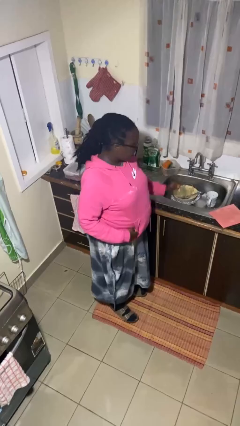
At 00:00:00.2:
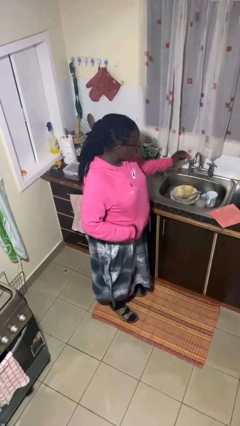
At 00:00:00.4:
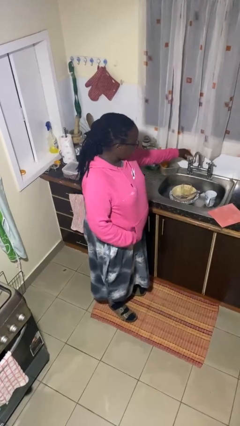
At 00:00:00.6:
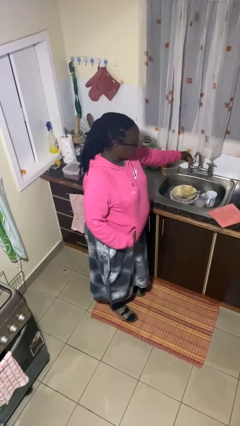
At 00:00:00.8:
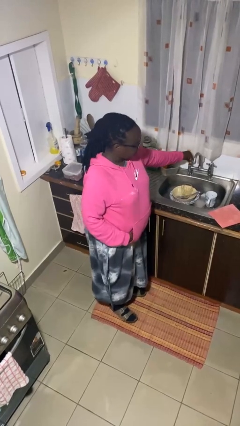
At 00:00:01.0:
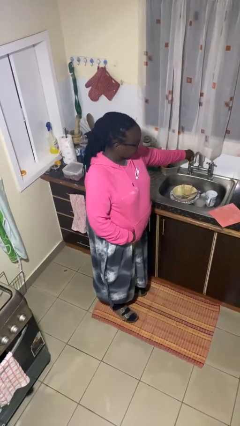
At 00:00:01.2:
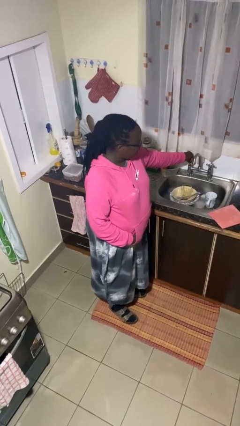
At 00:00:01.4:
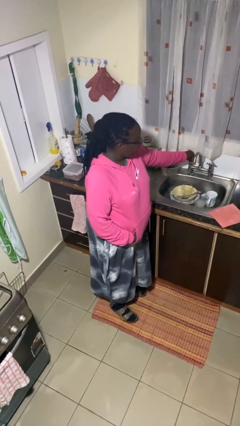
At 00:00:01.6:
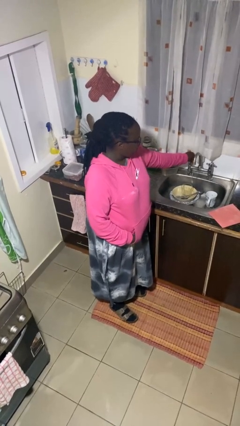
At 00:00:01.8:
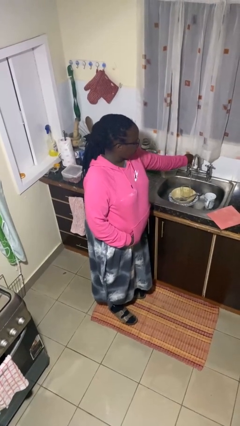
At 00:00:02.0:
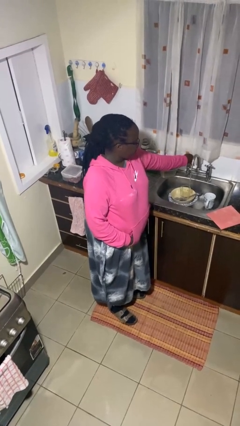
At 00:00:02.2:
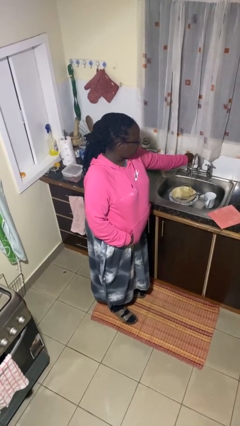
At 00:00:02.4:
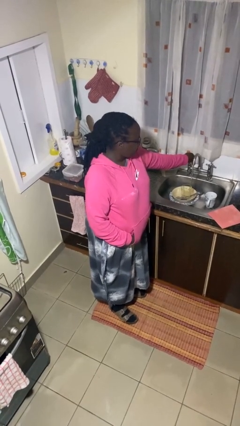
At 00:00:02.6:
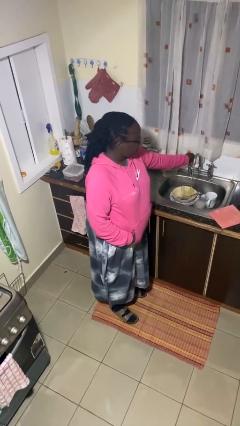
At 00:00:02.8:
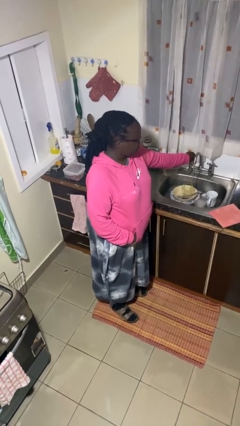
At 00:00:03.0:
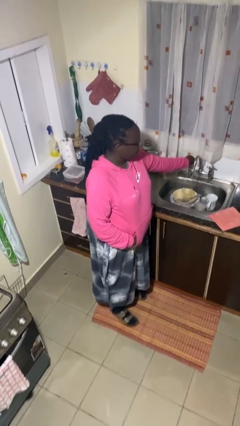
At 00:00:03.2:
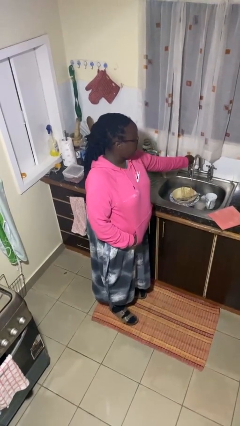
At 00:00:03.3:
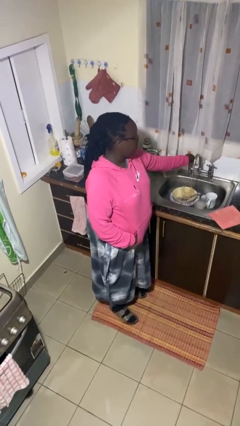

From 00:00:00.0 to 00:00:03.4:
person turns on faucet

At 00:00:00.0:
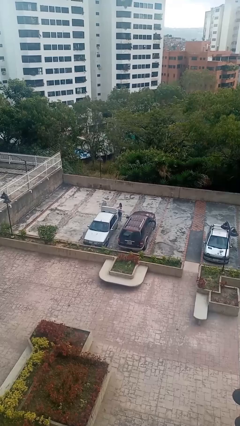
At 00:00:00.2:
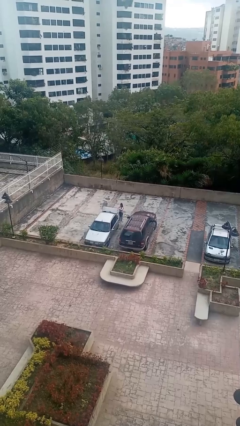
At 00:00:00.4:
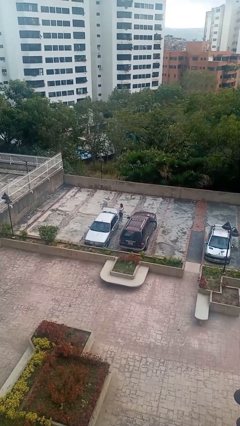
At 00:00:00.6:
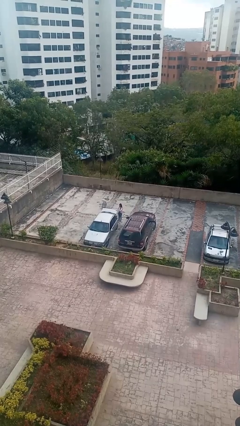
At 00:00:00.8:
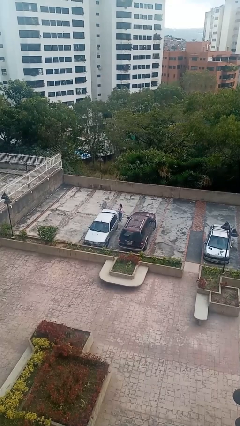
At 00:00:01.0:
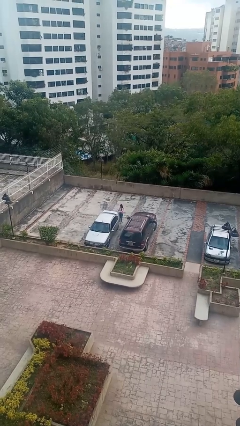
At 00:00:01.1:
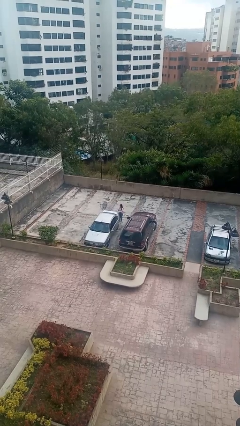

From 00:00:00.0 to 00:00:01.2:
person closes car trunk

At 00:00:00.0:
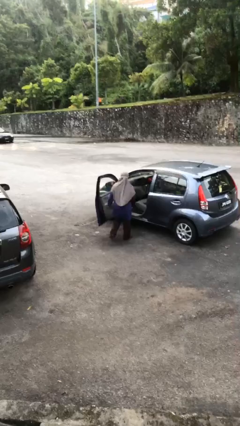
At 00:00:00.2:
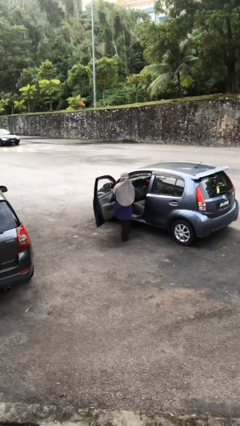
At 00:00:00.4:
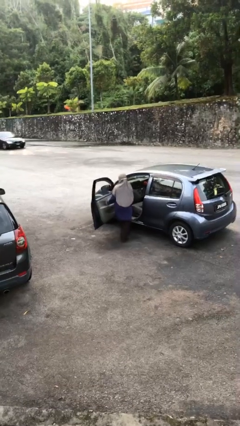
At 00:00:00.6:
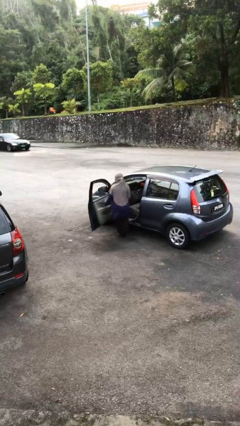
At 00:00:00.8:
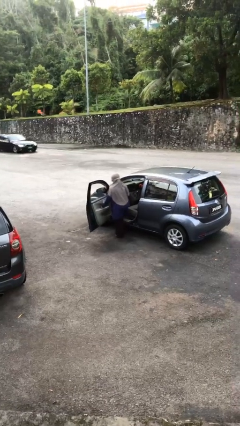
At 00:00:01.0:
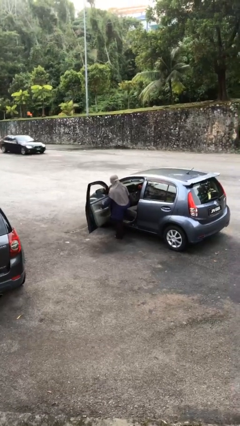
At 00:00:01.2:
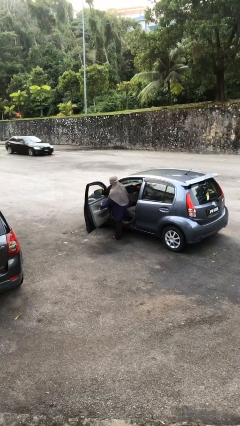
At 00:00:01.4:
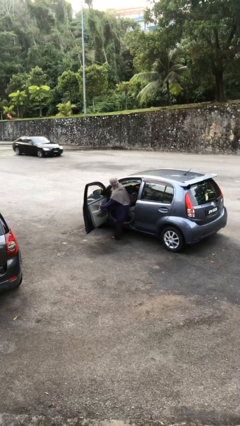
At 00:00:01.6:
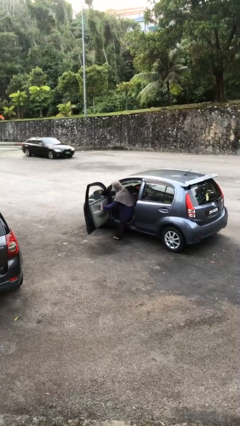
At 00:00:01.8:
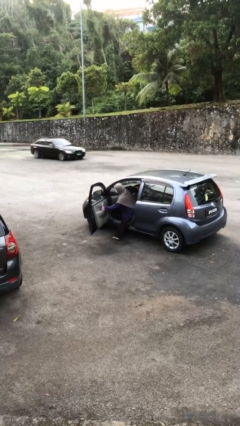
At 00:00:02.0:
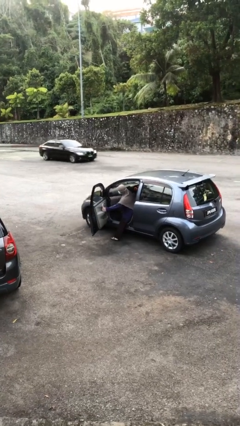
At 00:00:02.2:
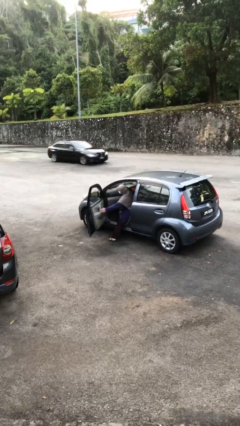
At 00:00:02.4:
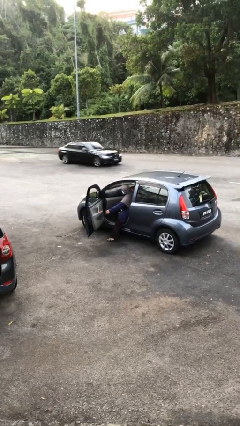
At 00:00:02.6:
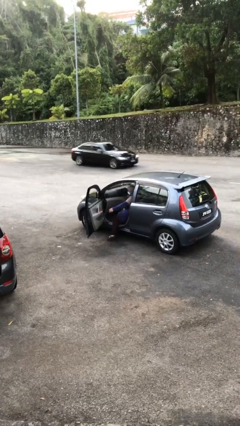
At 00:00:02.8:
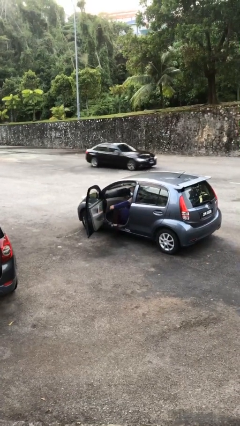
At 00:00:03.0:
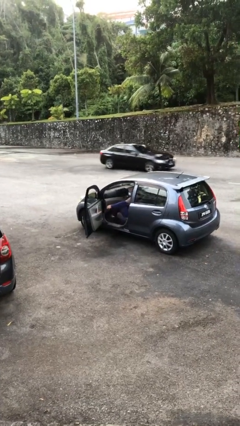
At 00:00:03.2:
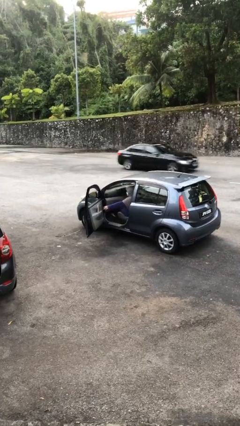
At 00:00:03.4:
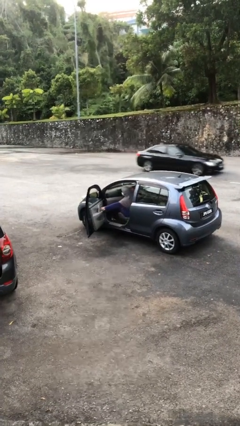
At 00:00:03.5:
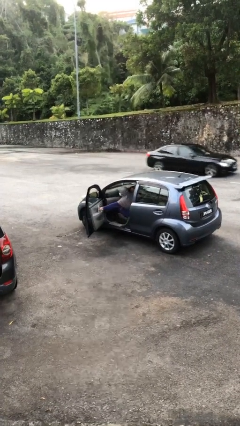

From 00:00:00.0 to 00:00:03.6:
person enters car

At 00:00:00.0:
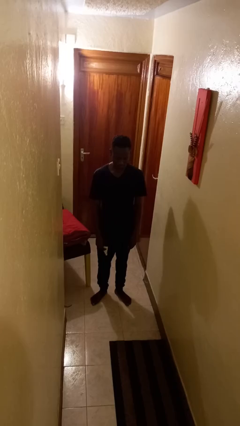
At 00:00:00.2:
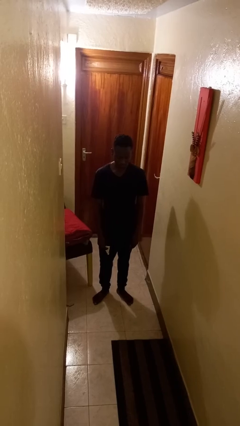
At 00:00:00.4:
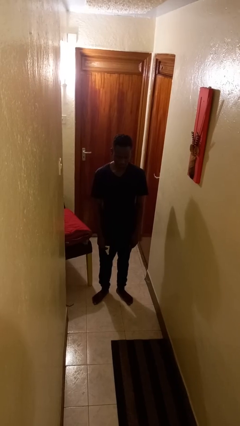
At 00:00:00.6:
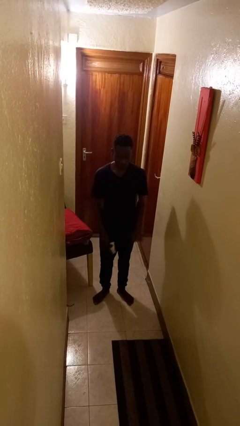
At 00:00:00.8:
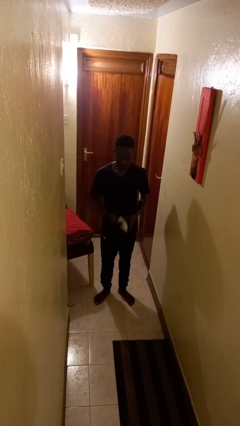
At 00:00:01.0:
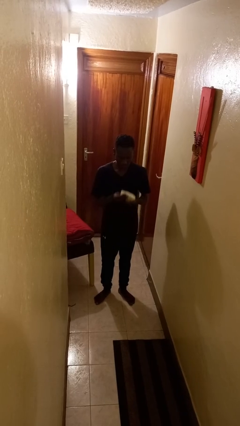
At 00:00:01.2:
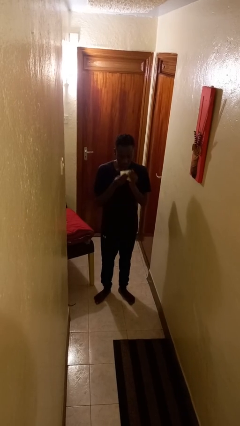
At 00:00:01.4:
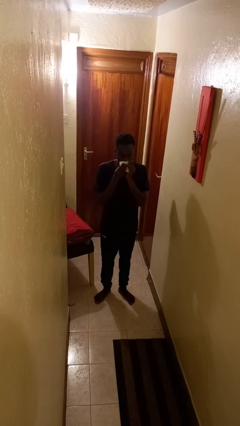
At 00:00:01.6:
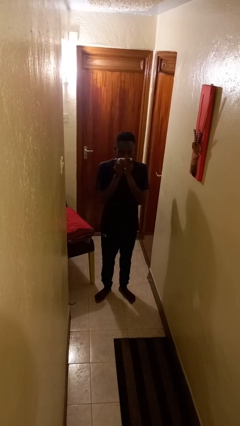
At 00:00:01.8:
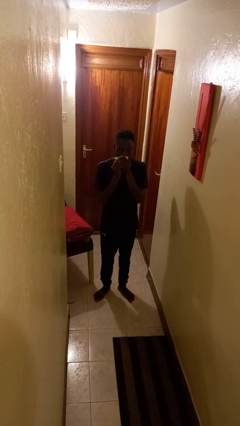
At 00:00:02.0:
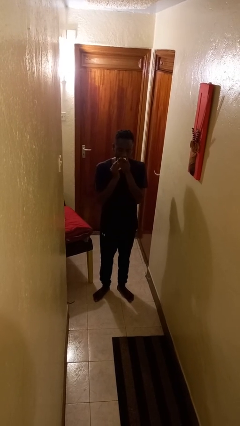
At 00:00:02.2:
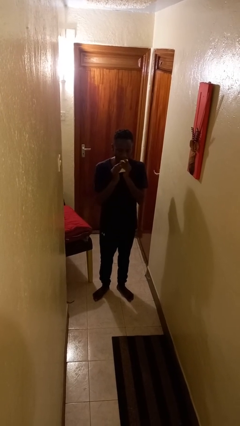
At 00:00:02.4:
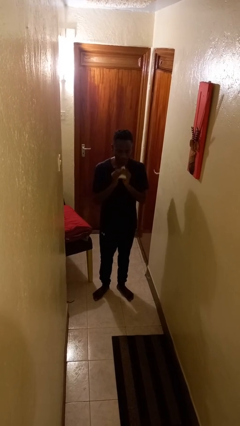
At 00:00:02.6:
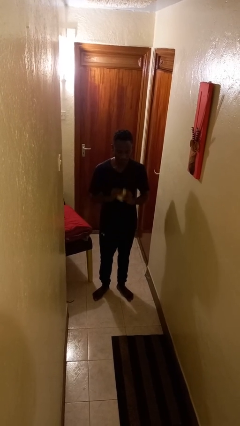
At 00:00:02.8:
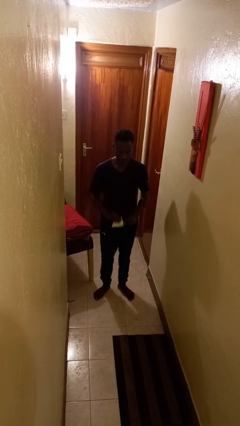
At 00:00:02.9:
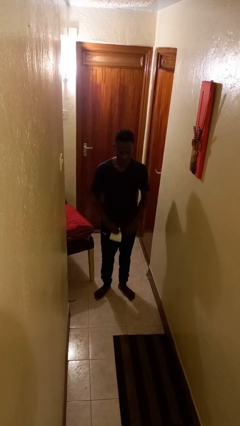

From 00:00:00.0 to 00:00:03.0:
person wipes mouth with napkin

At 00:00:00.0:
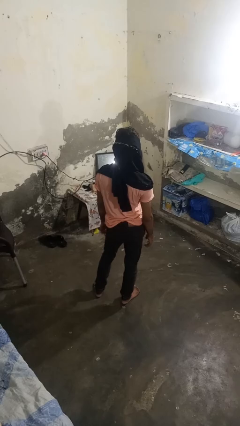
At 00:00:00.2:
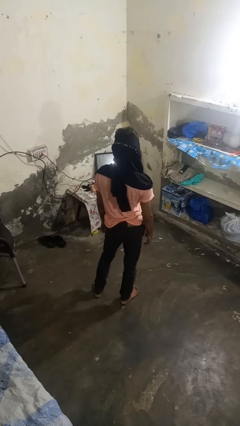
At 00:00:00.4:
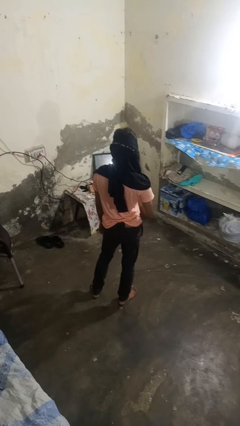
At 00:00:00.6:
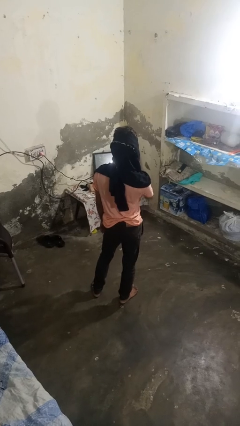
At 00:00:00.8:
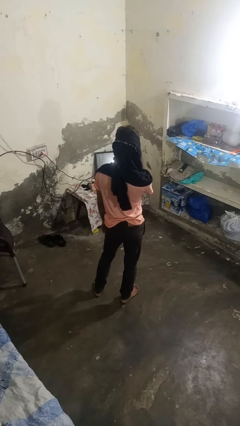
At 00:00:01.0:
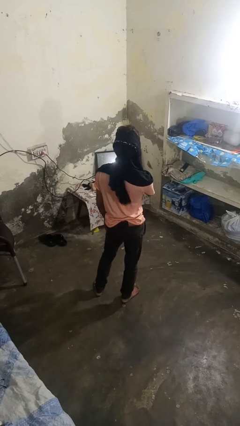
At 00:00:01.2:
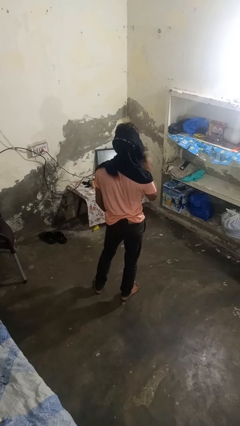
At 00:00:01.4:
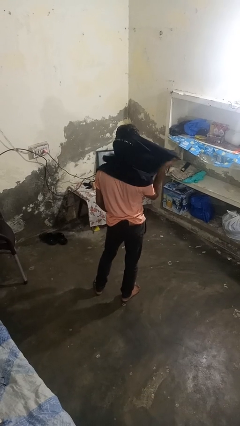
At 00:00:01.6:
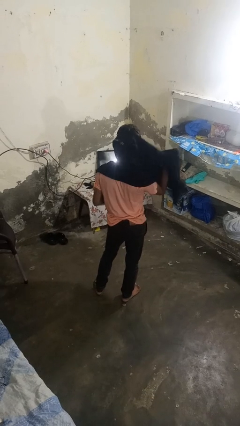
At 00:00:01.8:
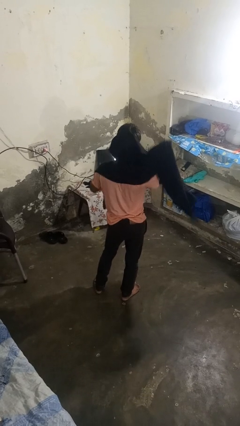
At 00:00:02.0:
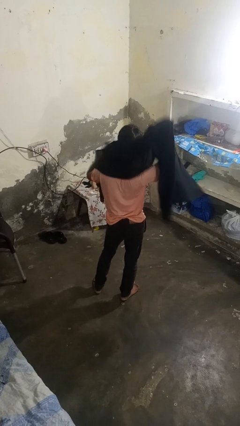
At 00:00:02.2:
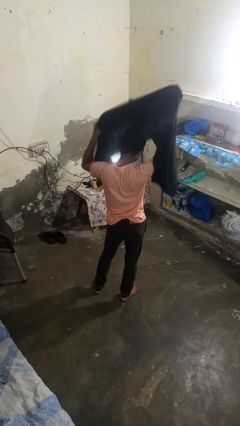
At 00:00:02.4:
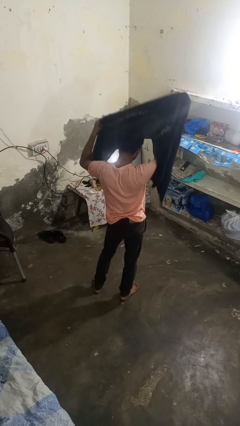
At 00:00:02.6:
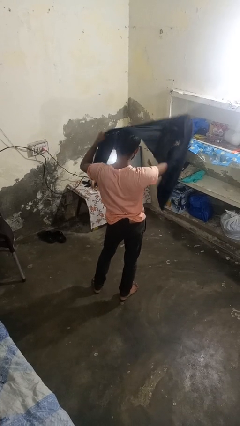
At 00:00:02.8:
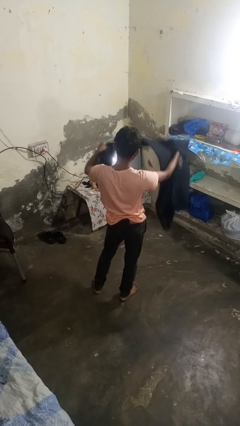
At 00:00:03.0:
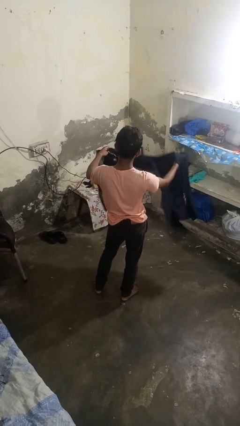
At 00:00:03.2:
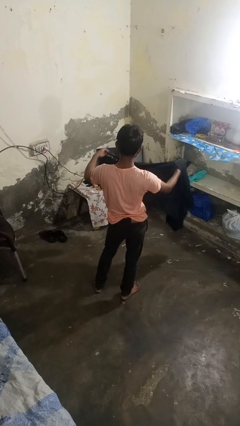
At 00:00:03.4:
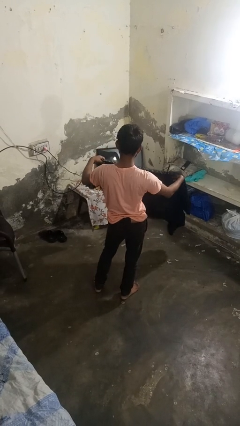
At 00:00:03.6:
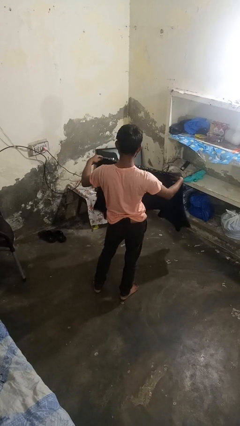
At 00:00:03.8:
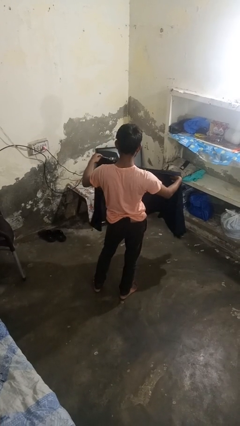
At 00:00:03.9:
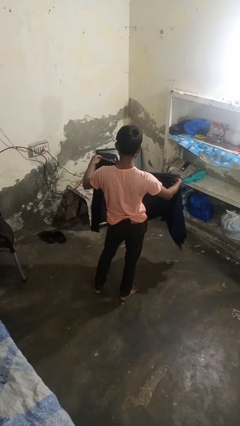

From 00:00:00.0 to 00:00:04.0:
person takes off scarf

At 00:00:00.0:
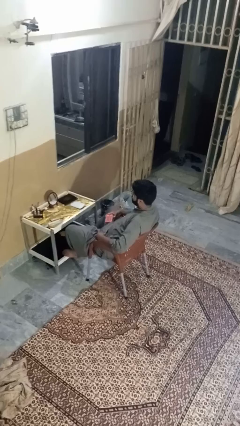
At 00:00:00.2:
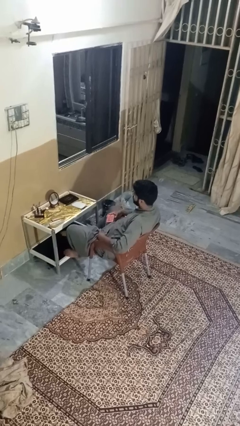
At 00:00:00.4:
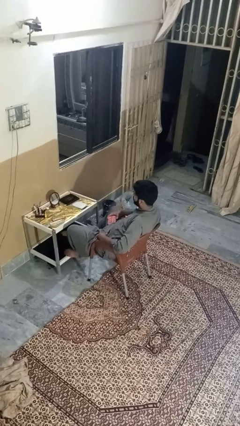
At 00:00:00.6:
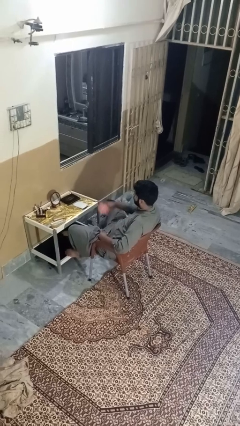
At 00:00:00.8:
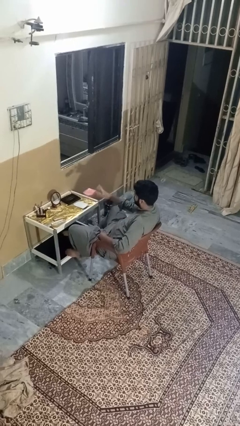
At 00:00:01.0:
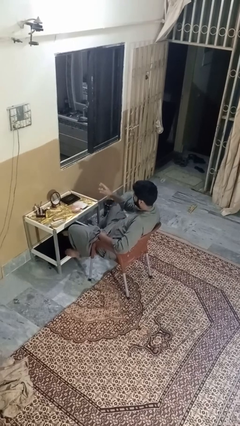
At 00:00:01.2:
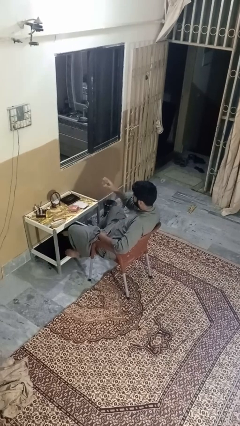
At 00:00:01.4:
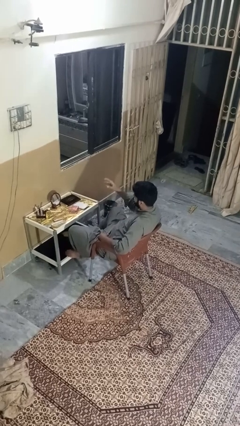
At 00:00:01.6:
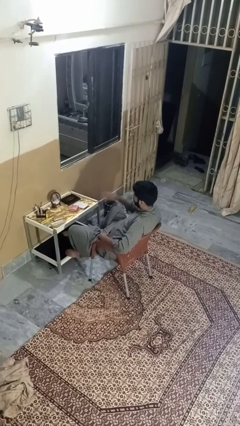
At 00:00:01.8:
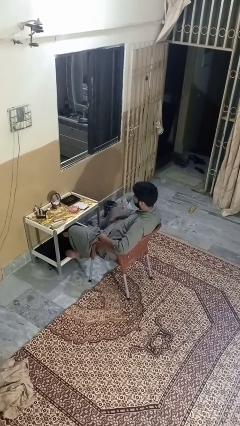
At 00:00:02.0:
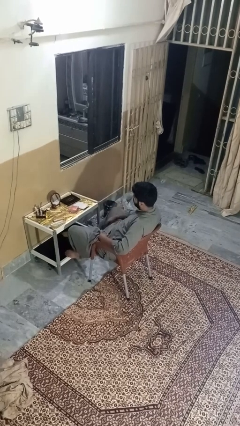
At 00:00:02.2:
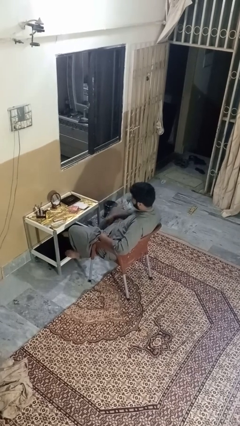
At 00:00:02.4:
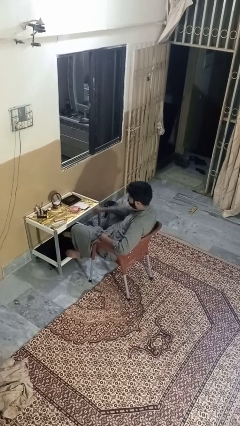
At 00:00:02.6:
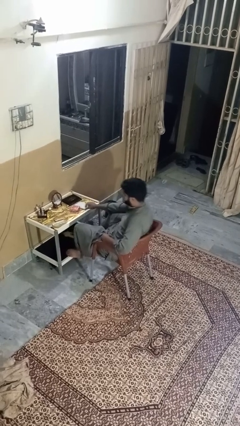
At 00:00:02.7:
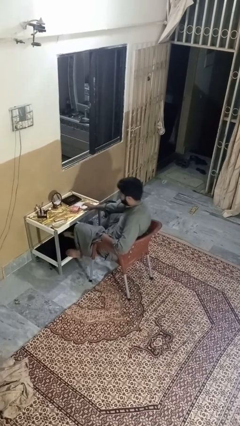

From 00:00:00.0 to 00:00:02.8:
person throws object on table
